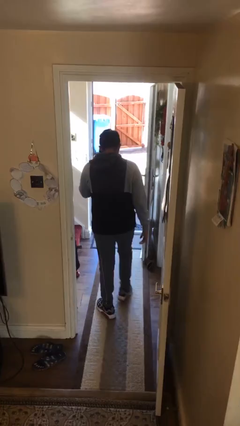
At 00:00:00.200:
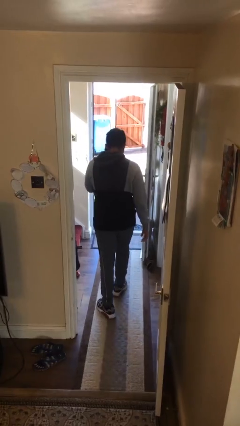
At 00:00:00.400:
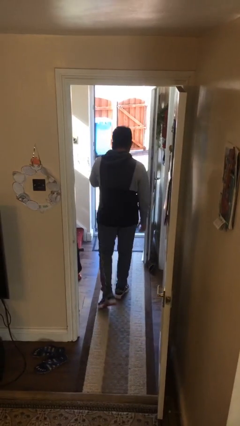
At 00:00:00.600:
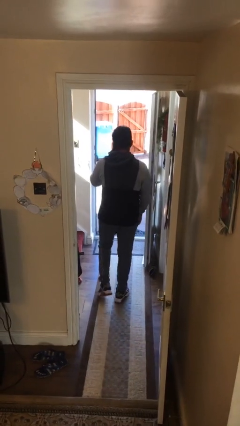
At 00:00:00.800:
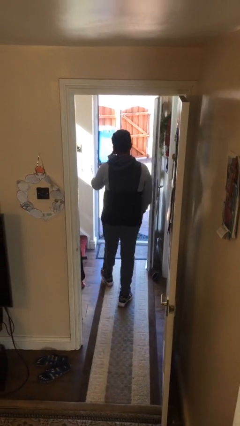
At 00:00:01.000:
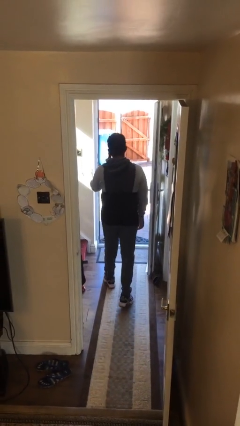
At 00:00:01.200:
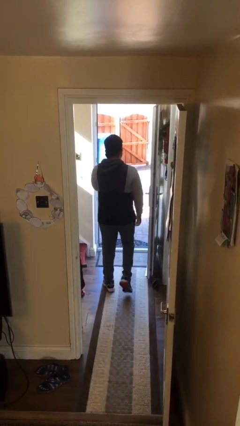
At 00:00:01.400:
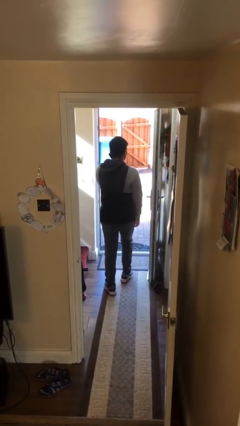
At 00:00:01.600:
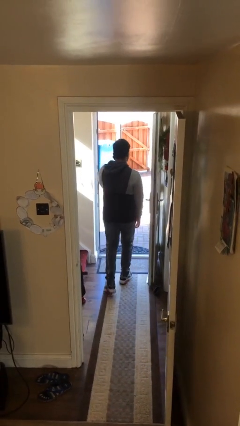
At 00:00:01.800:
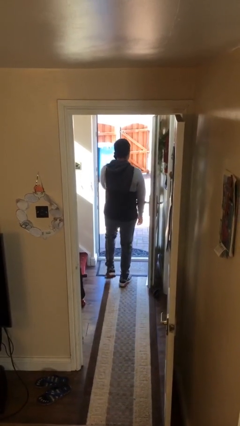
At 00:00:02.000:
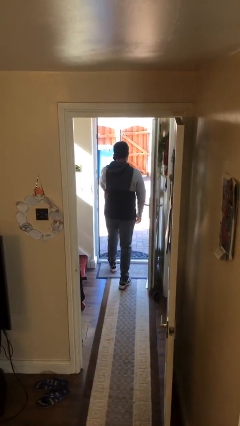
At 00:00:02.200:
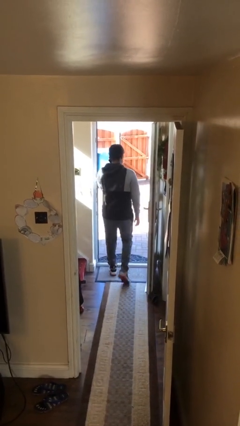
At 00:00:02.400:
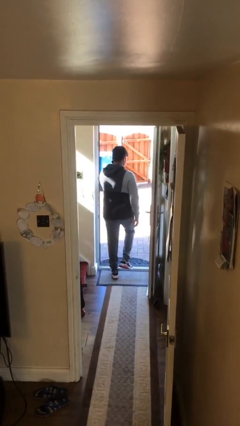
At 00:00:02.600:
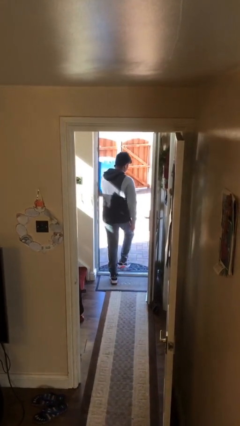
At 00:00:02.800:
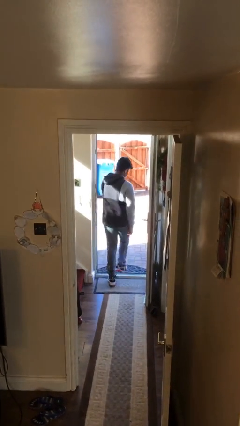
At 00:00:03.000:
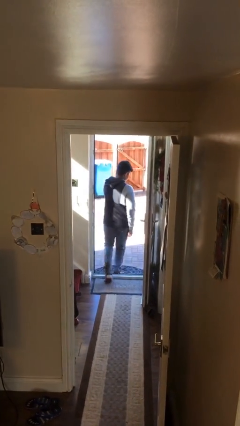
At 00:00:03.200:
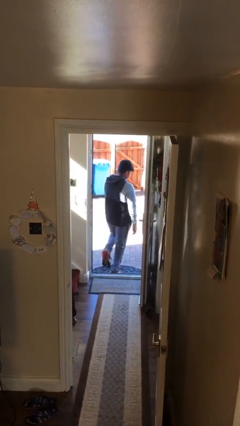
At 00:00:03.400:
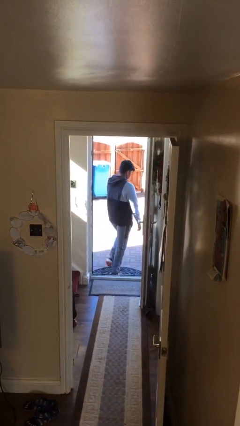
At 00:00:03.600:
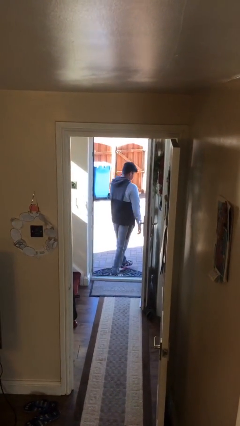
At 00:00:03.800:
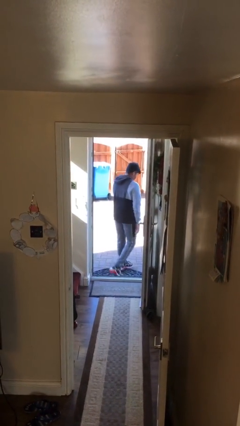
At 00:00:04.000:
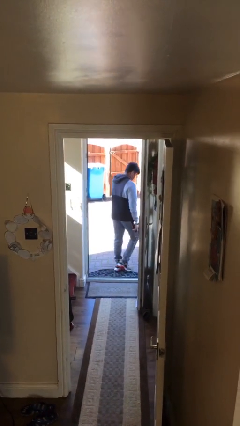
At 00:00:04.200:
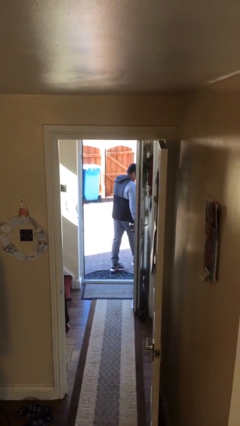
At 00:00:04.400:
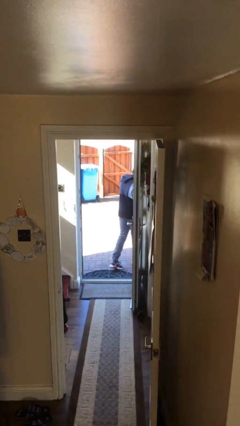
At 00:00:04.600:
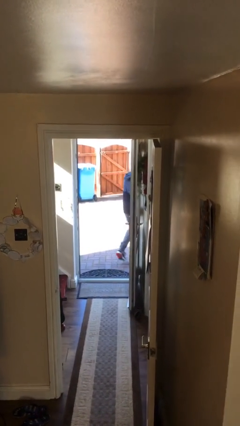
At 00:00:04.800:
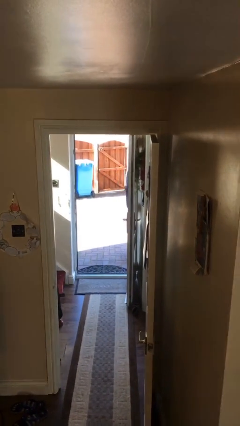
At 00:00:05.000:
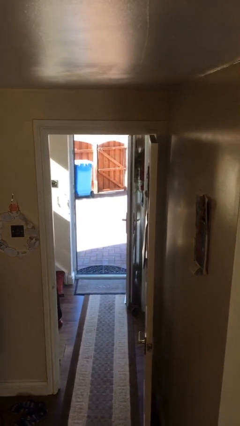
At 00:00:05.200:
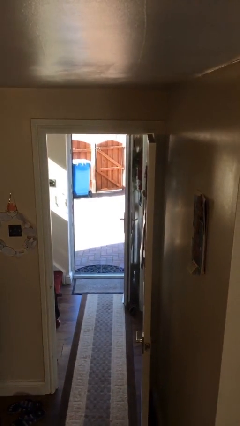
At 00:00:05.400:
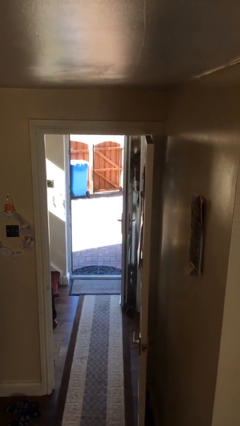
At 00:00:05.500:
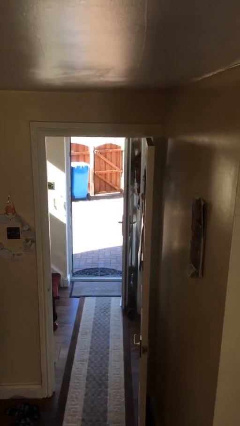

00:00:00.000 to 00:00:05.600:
person exits scene through structure

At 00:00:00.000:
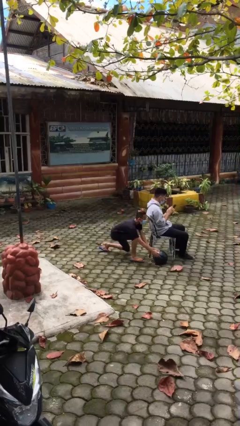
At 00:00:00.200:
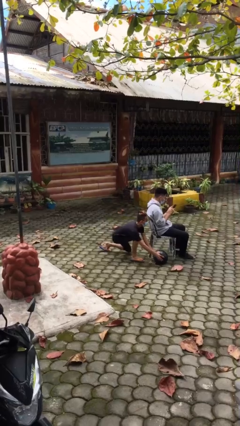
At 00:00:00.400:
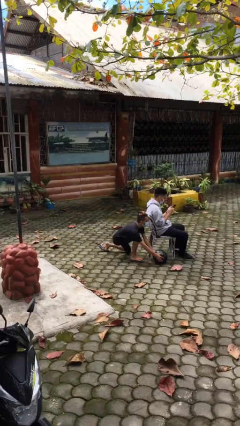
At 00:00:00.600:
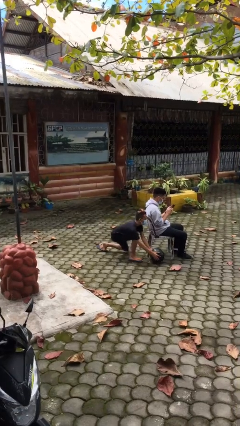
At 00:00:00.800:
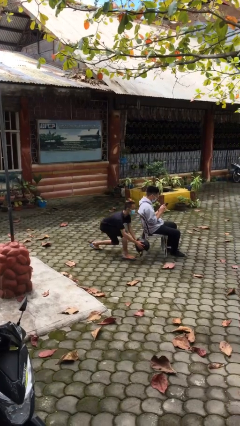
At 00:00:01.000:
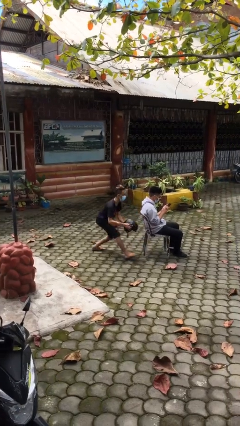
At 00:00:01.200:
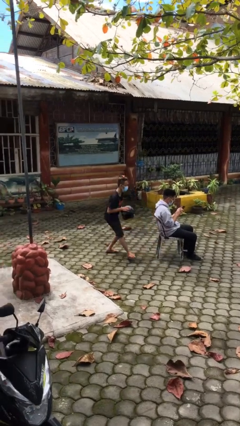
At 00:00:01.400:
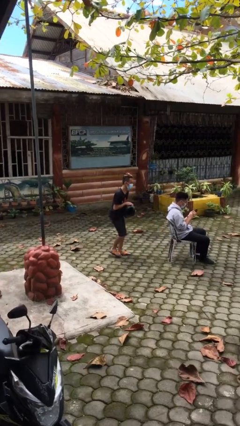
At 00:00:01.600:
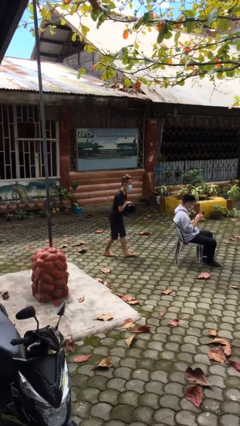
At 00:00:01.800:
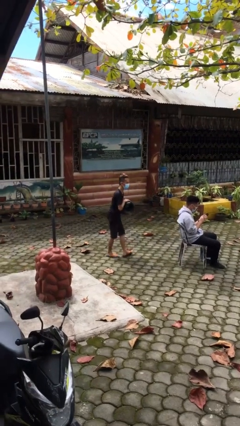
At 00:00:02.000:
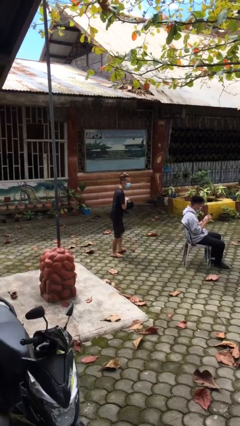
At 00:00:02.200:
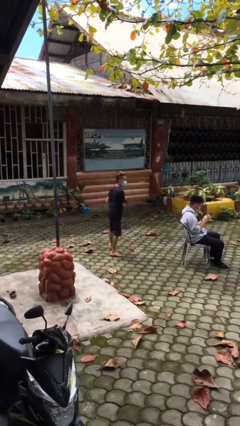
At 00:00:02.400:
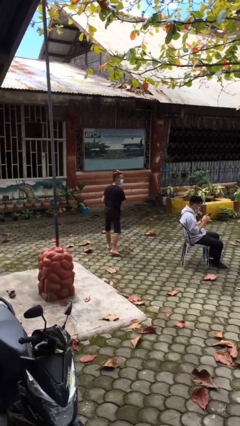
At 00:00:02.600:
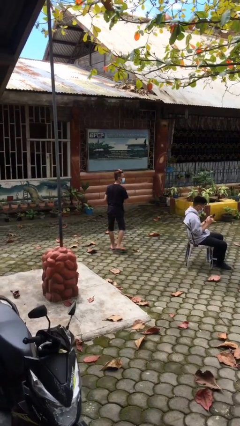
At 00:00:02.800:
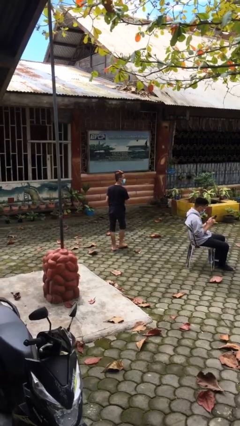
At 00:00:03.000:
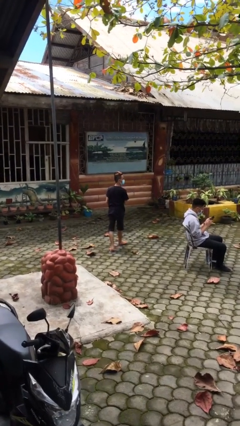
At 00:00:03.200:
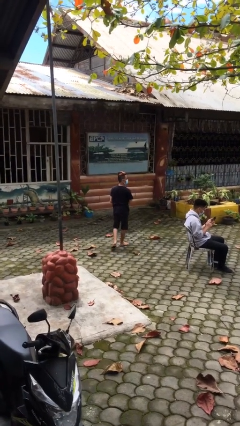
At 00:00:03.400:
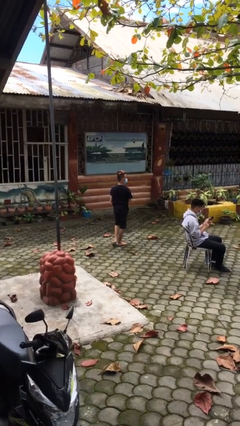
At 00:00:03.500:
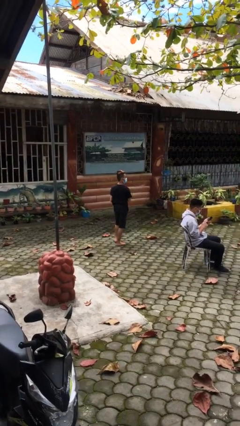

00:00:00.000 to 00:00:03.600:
person steals object from person

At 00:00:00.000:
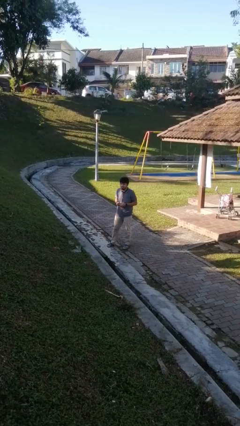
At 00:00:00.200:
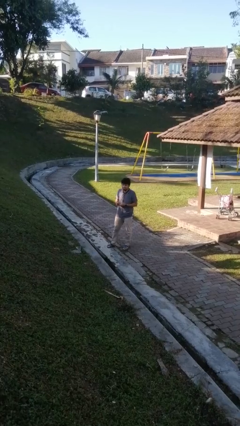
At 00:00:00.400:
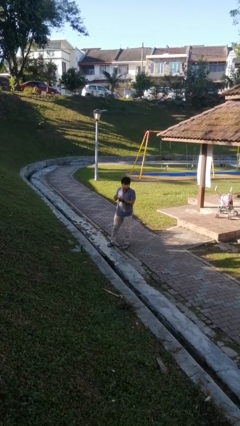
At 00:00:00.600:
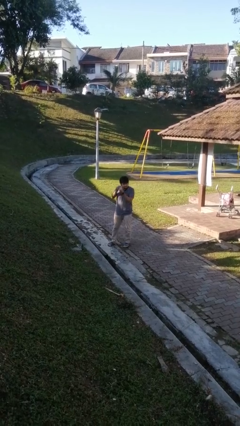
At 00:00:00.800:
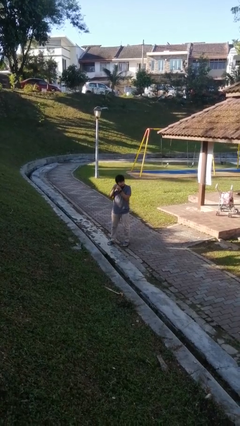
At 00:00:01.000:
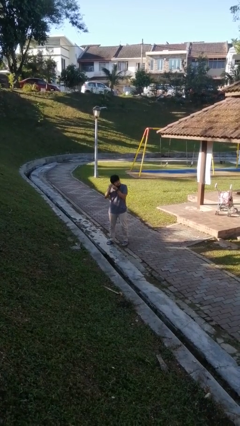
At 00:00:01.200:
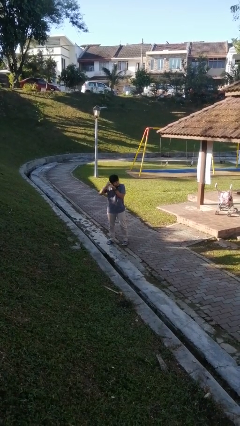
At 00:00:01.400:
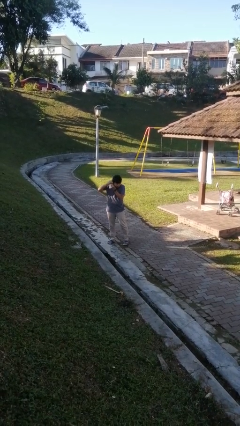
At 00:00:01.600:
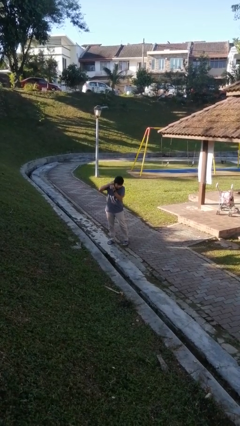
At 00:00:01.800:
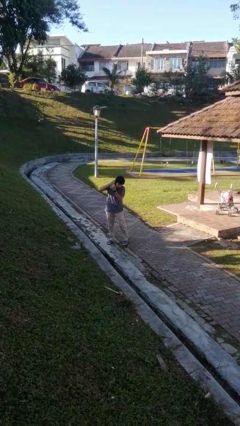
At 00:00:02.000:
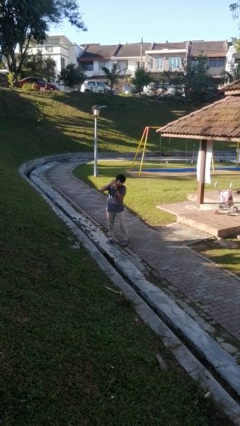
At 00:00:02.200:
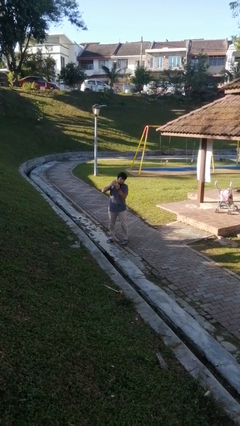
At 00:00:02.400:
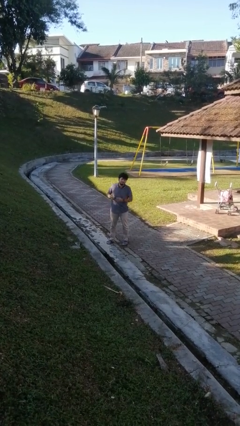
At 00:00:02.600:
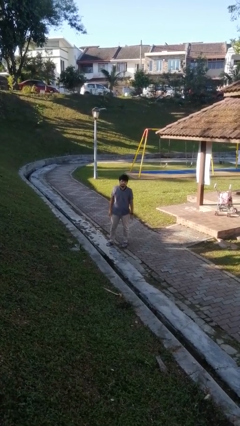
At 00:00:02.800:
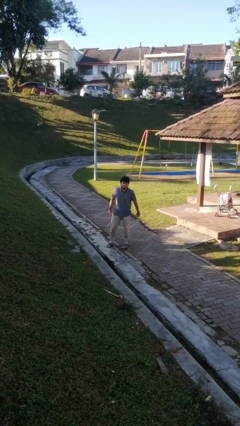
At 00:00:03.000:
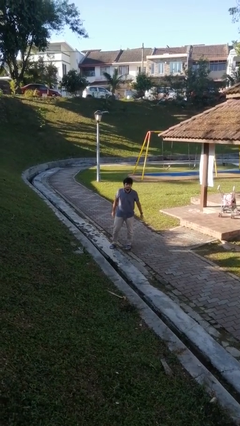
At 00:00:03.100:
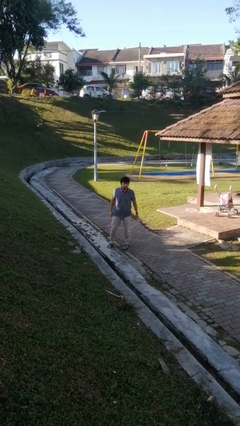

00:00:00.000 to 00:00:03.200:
person puts on earrings

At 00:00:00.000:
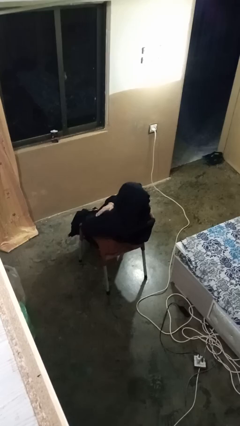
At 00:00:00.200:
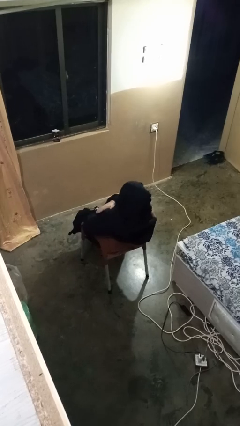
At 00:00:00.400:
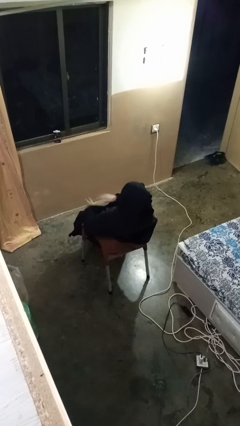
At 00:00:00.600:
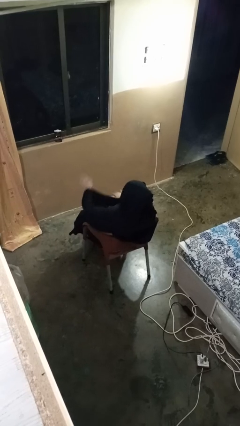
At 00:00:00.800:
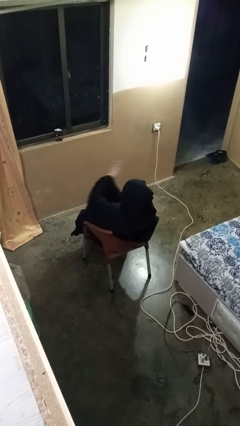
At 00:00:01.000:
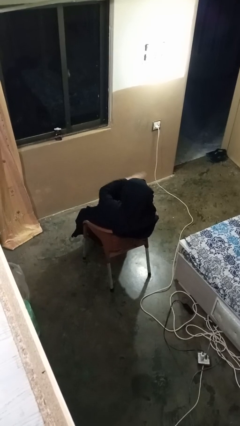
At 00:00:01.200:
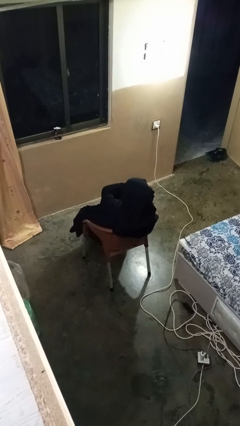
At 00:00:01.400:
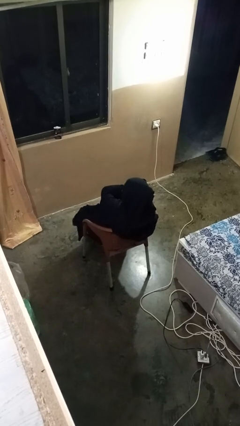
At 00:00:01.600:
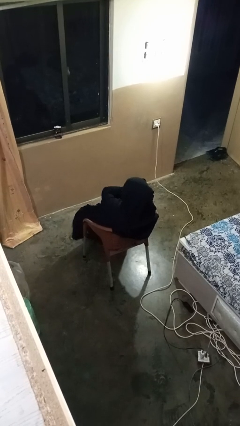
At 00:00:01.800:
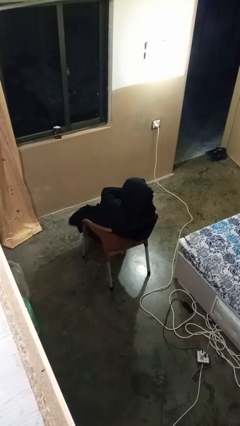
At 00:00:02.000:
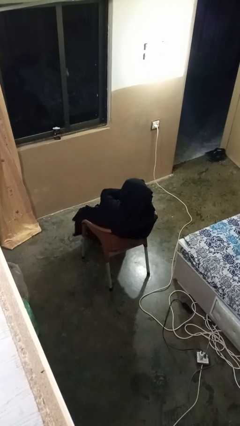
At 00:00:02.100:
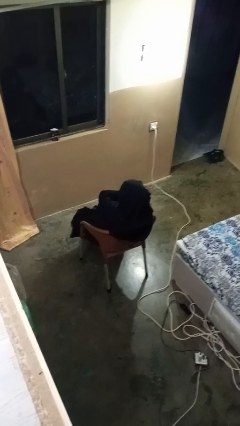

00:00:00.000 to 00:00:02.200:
person gestures swipe right

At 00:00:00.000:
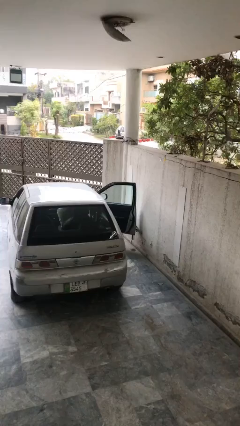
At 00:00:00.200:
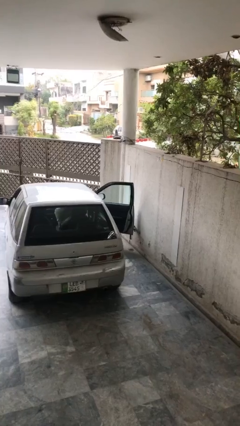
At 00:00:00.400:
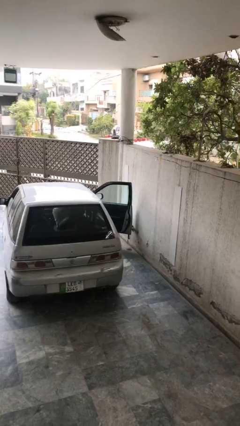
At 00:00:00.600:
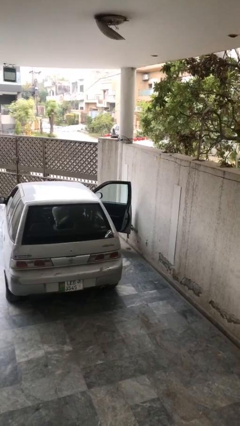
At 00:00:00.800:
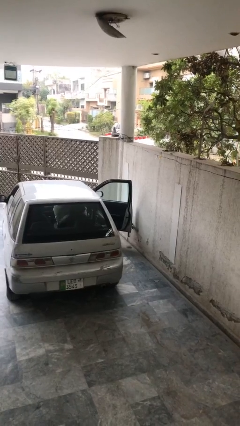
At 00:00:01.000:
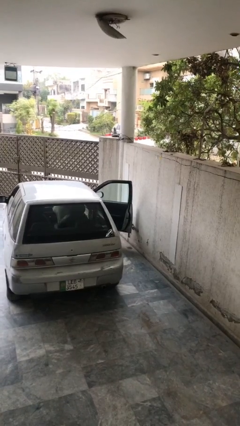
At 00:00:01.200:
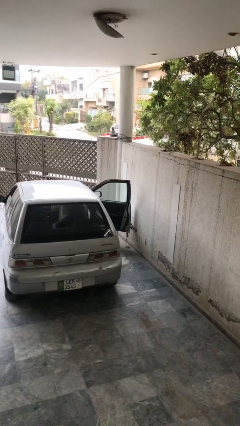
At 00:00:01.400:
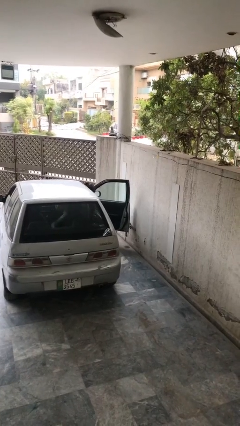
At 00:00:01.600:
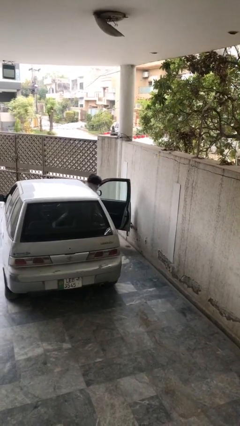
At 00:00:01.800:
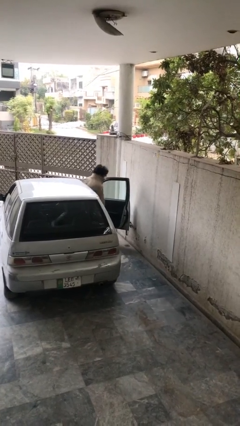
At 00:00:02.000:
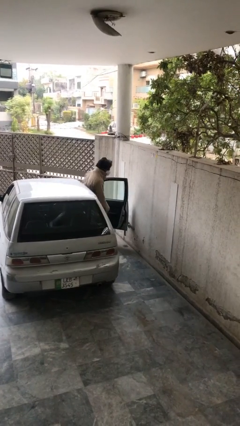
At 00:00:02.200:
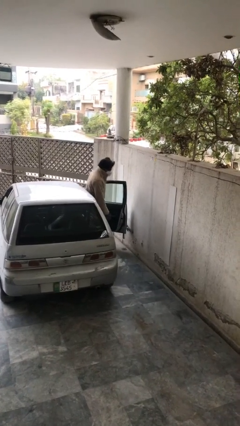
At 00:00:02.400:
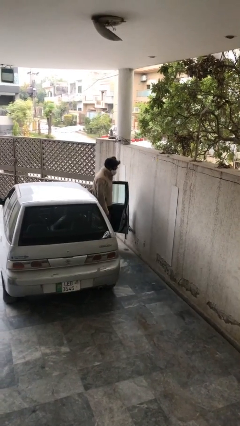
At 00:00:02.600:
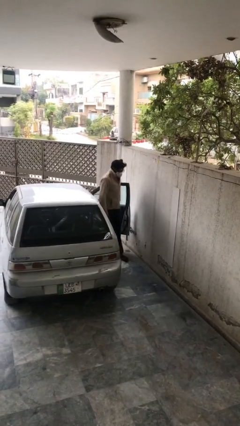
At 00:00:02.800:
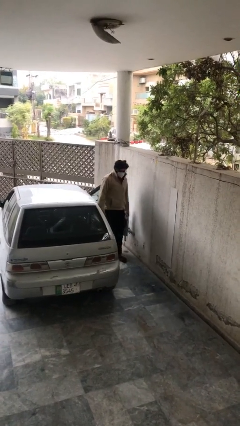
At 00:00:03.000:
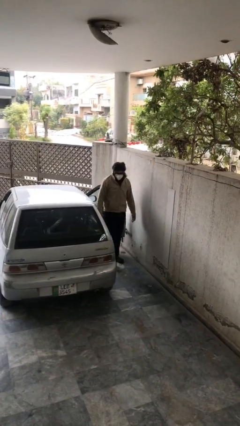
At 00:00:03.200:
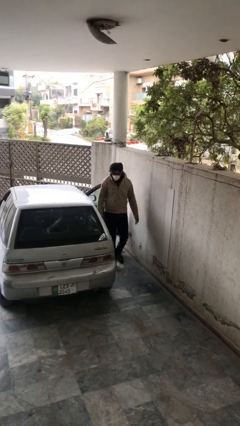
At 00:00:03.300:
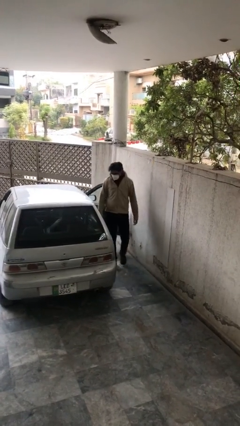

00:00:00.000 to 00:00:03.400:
person exits car
